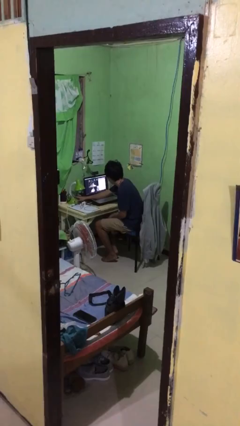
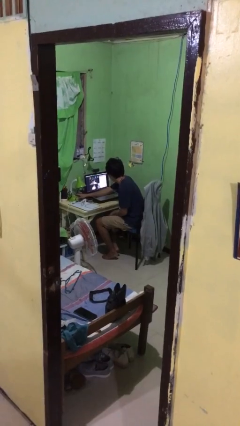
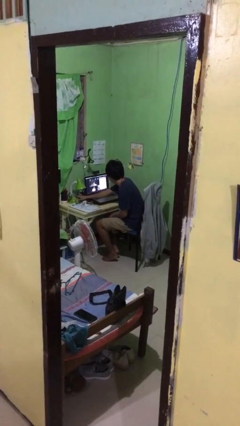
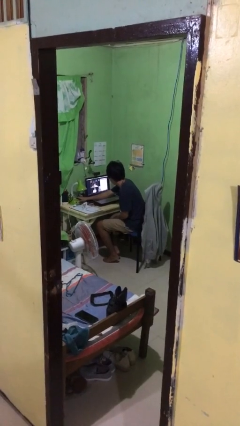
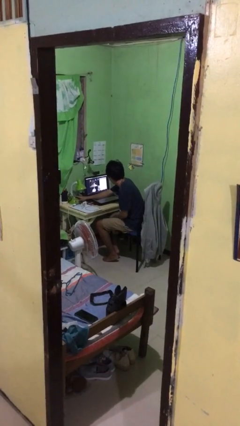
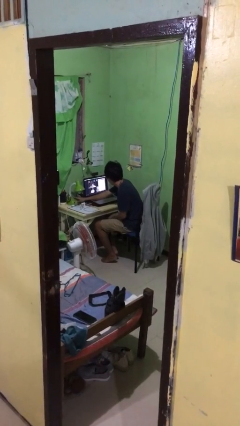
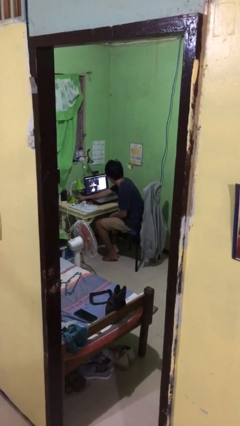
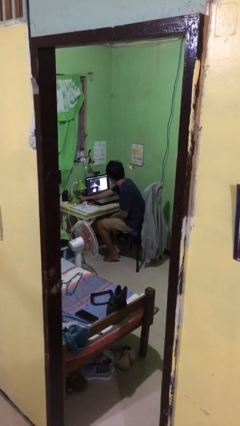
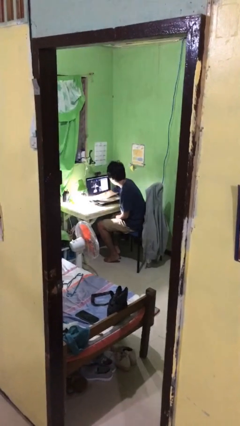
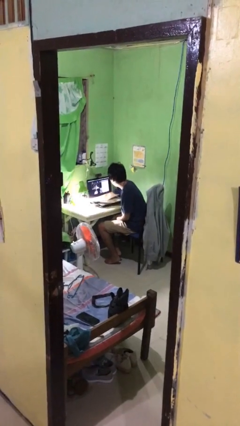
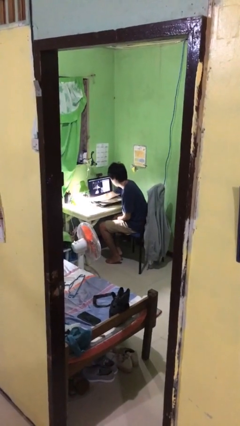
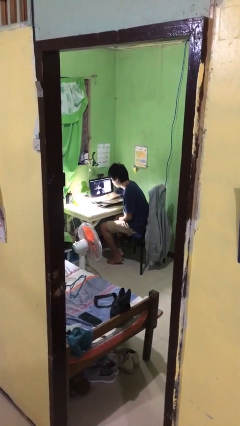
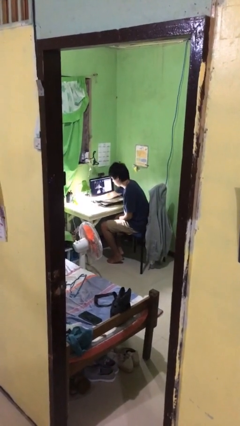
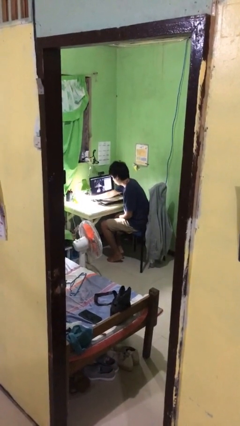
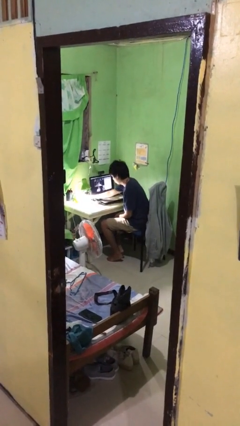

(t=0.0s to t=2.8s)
person turns on lamp

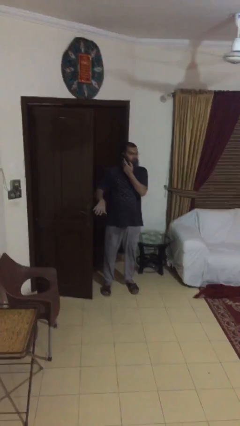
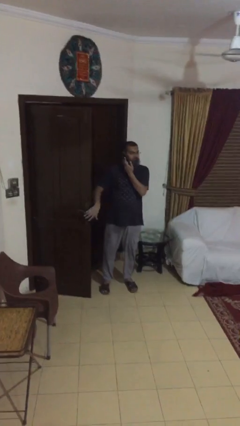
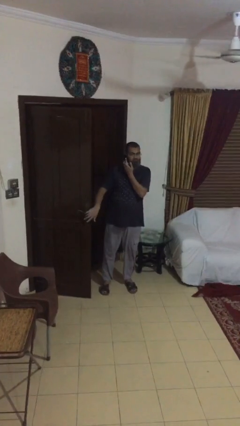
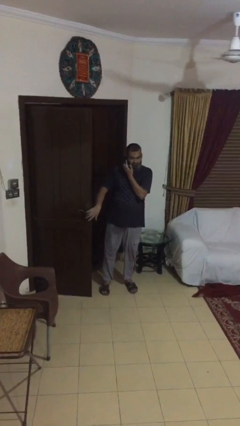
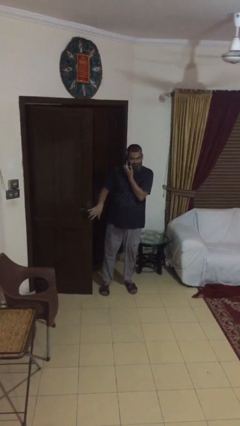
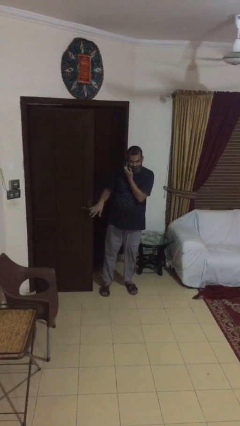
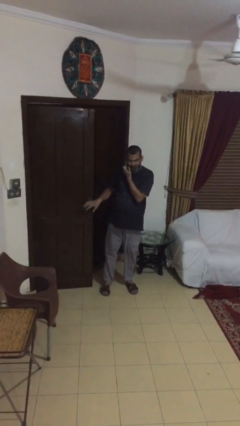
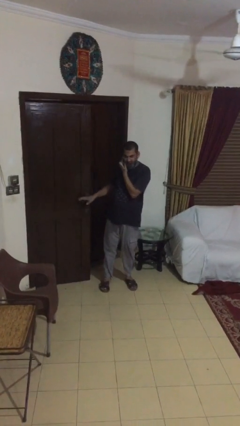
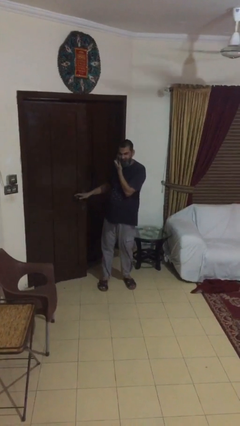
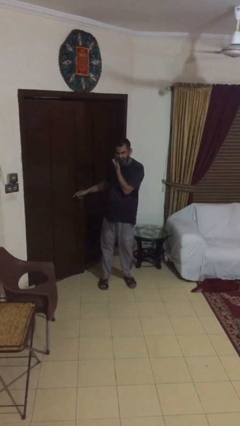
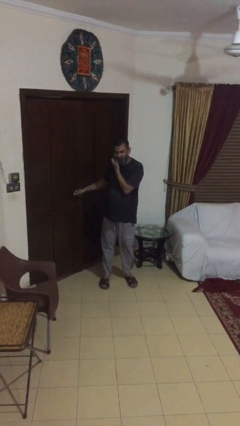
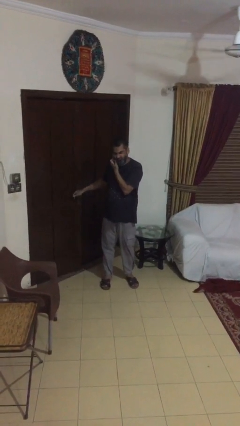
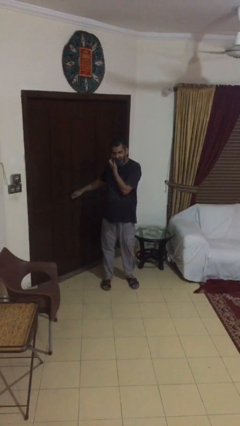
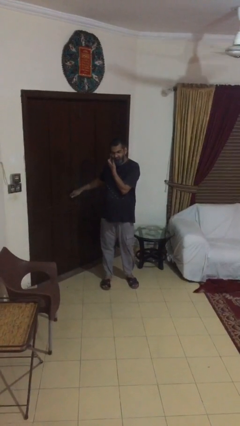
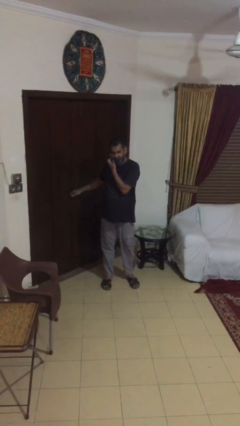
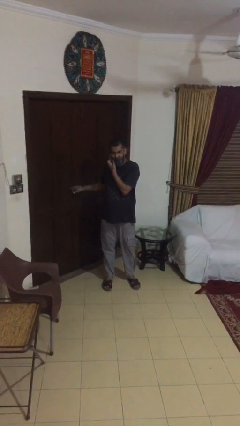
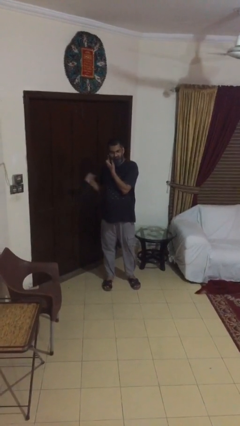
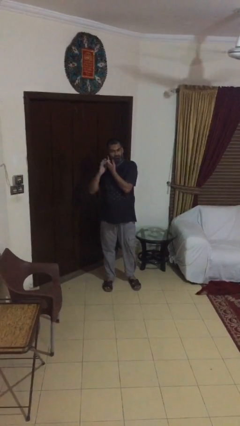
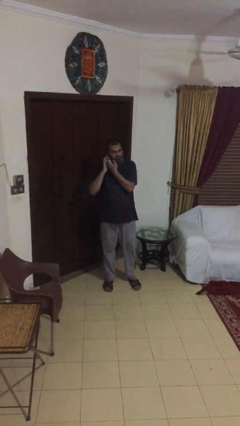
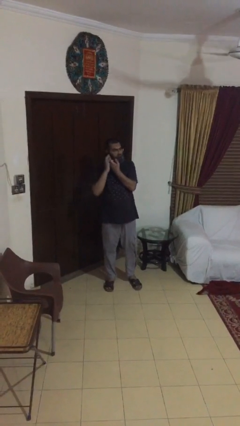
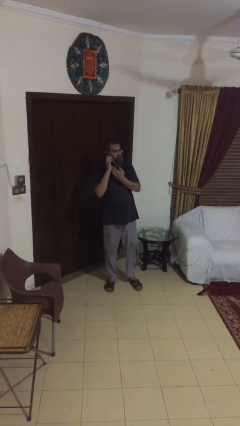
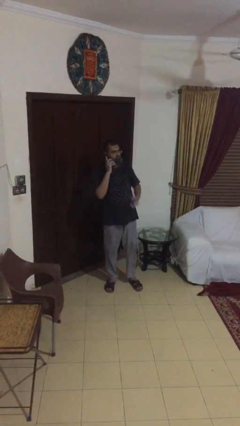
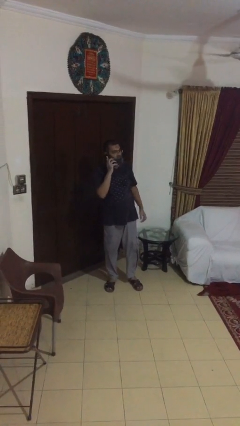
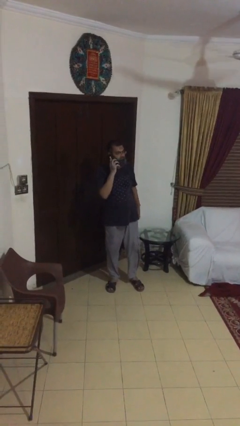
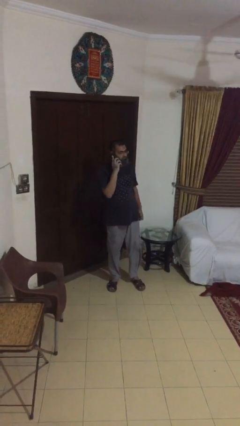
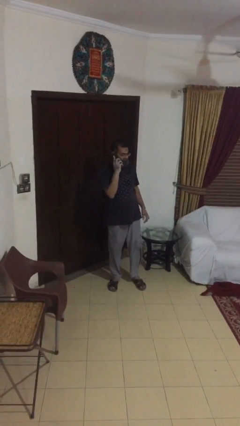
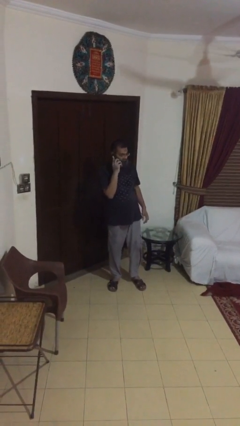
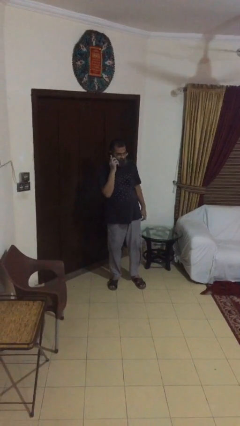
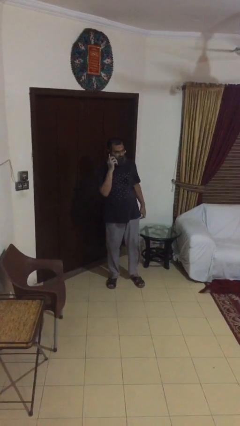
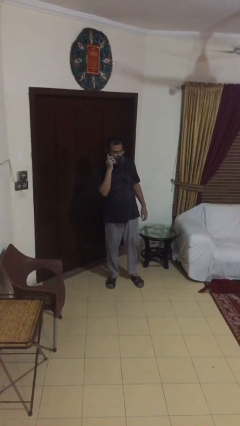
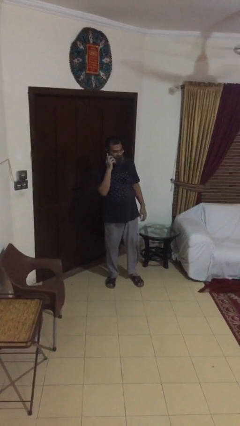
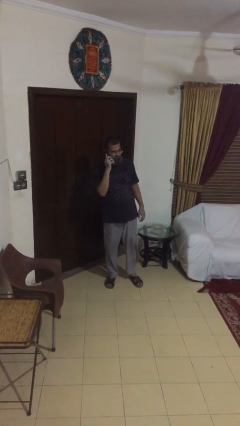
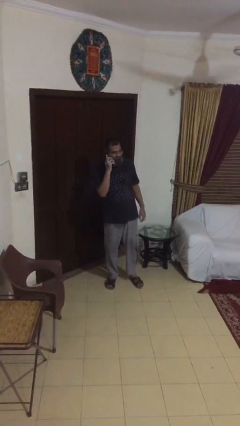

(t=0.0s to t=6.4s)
person closes facility door

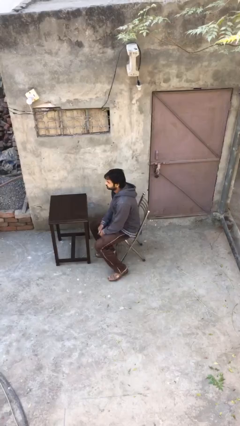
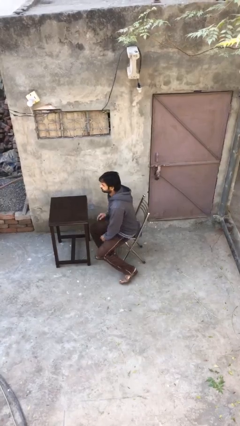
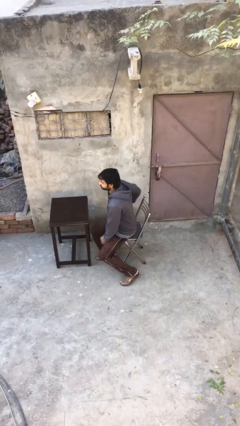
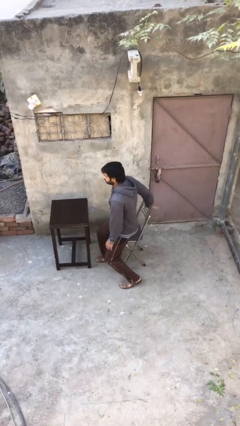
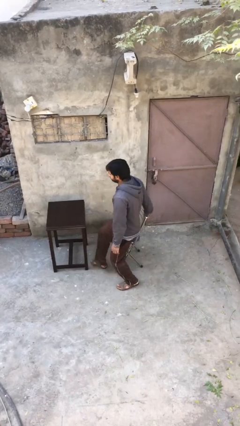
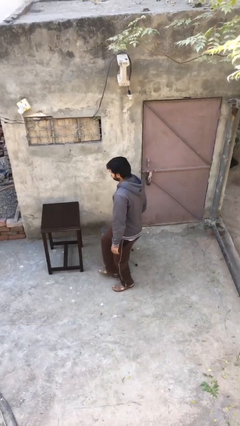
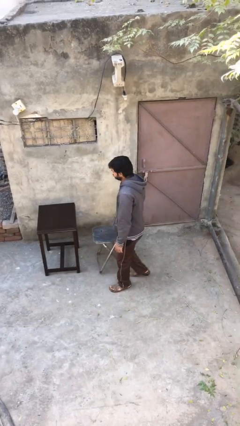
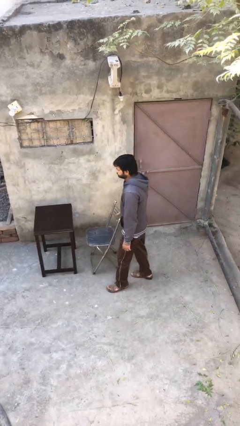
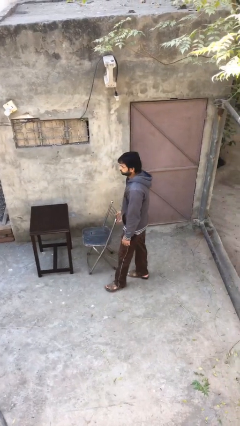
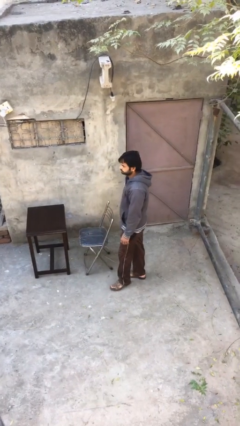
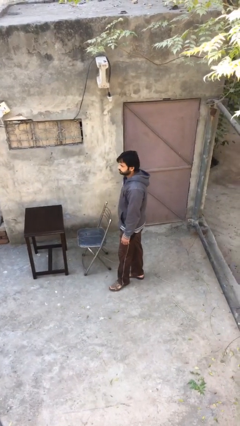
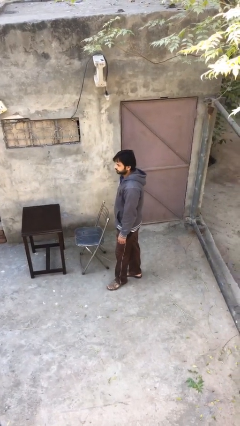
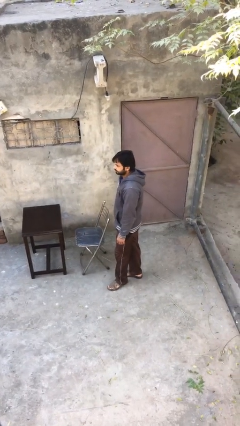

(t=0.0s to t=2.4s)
person stands up

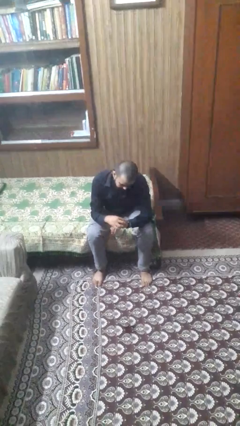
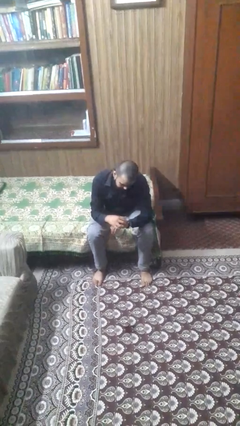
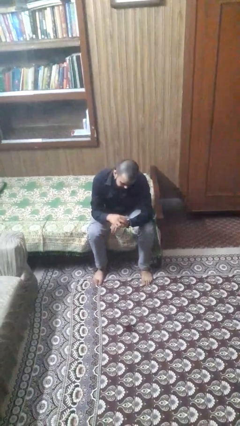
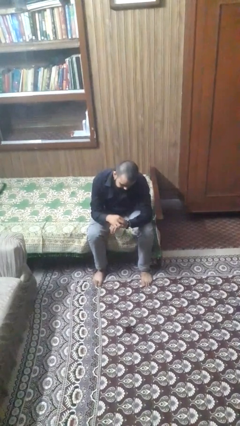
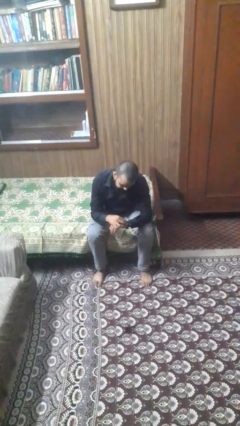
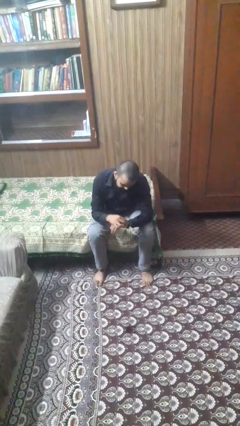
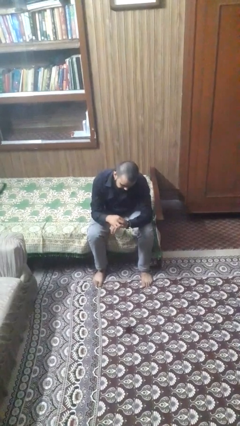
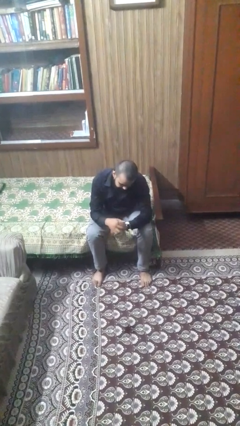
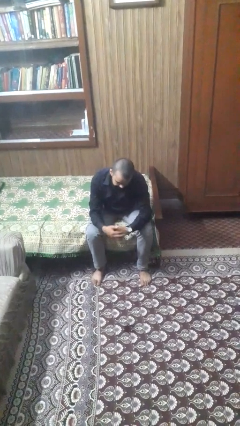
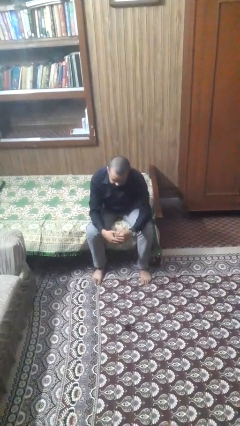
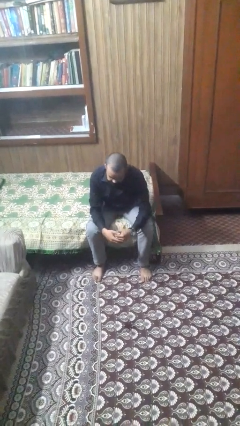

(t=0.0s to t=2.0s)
person looks at hands in lap

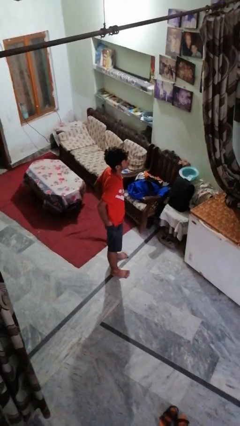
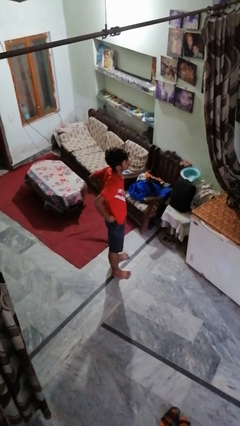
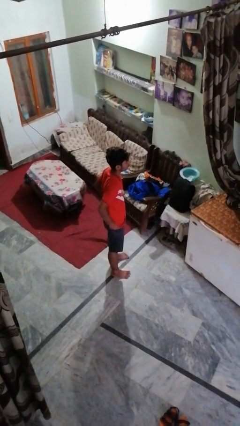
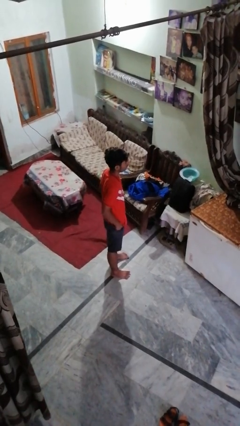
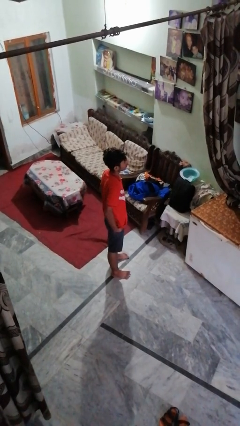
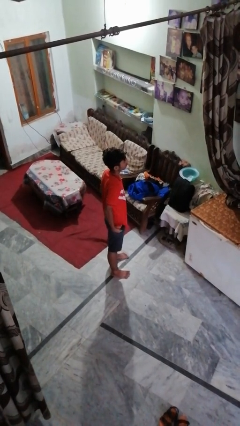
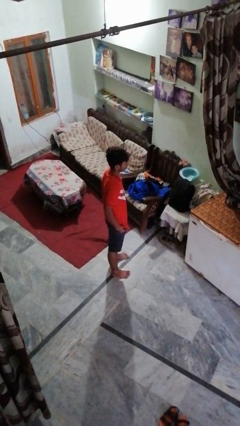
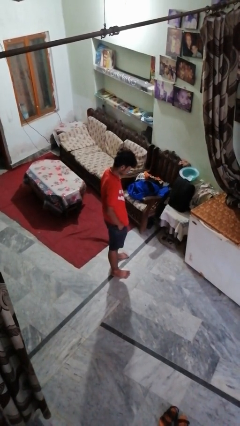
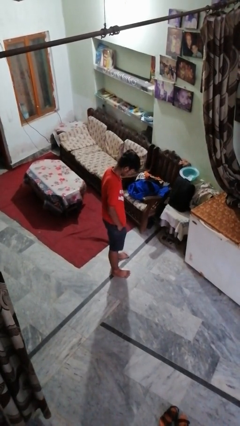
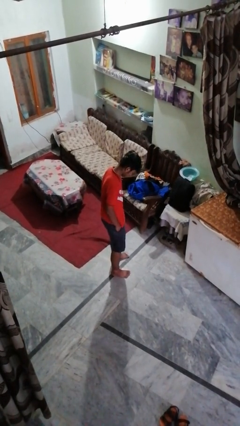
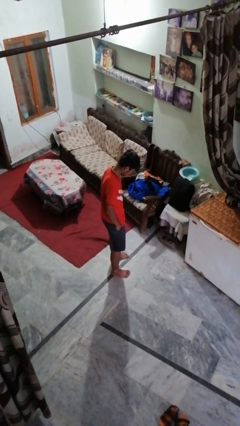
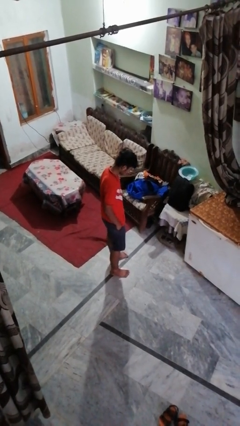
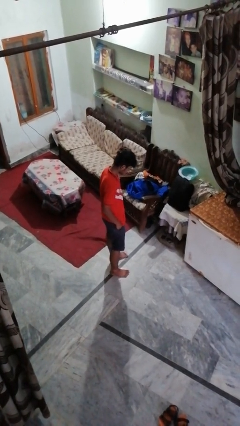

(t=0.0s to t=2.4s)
person puts hands in back pockets

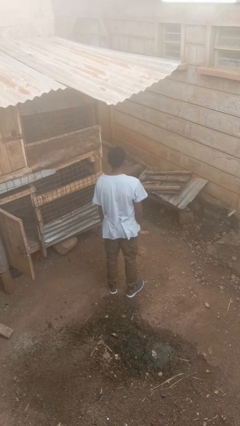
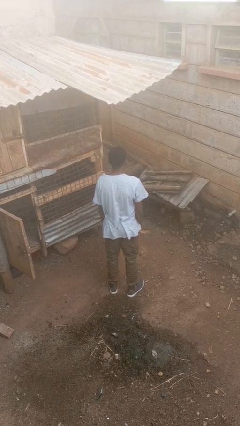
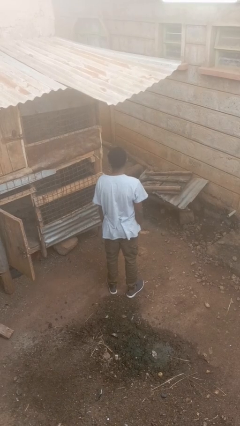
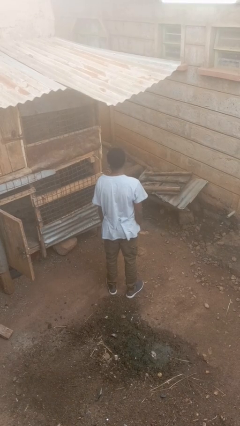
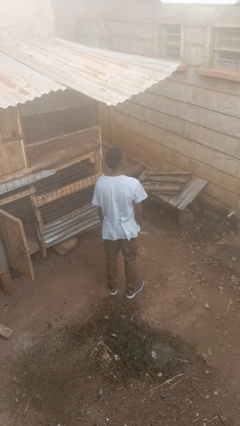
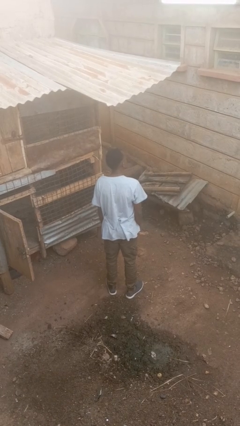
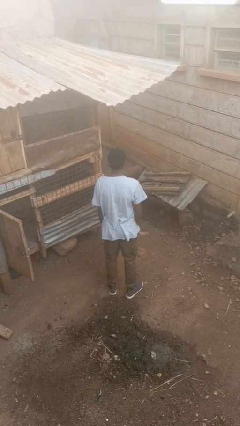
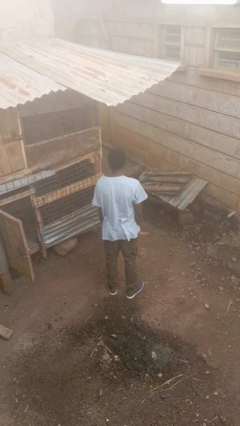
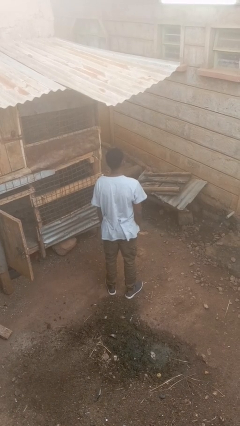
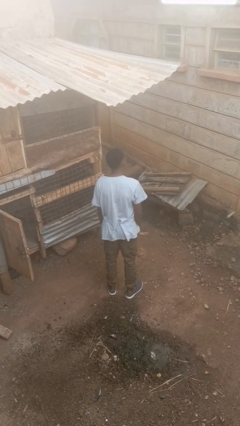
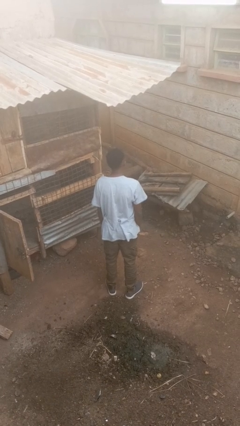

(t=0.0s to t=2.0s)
person shakes head
